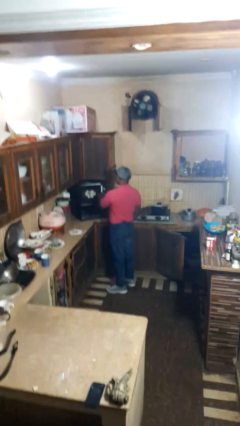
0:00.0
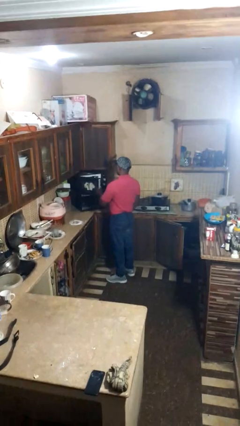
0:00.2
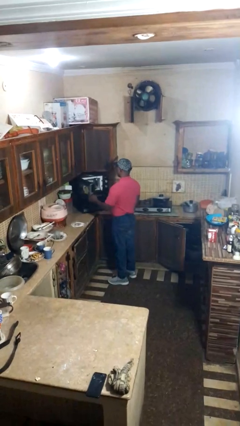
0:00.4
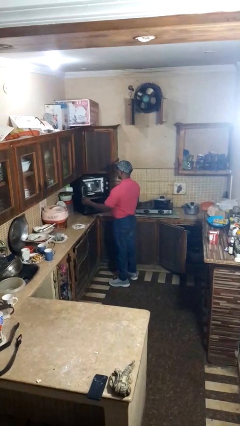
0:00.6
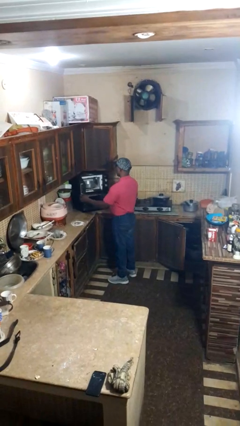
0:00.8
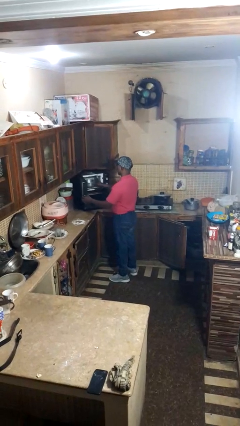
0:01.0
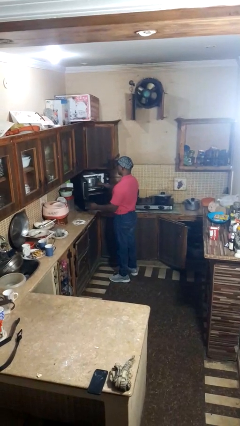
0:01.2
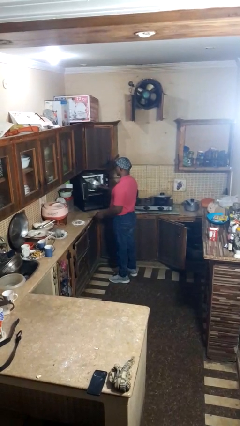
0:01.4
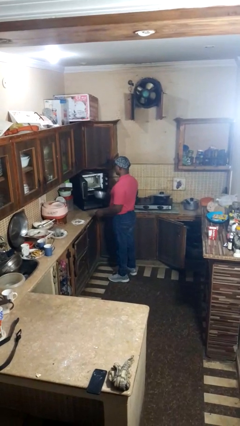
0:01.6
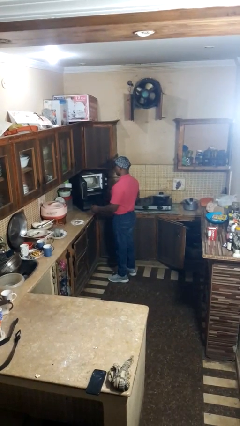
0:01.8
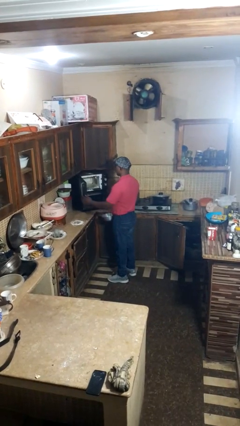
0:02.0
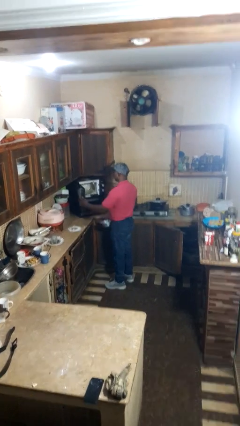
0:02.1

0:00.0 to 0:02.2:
person takes object from microwave

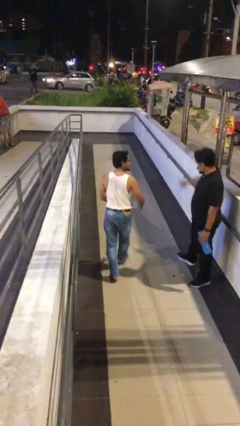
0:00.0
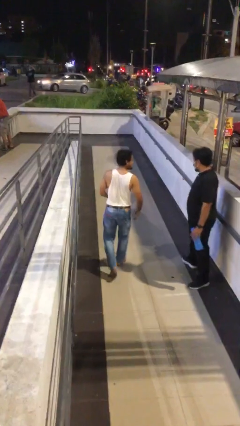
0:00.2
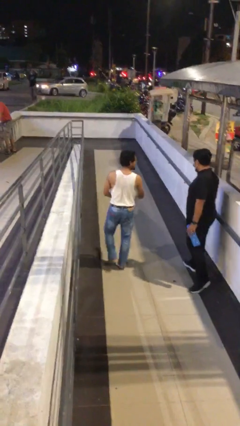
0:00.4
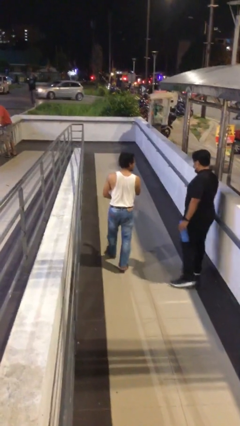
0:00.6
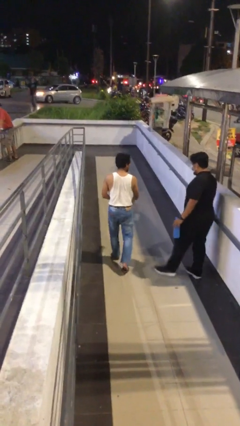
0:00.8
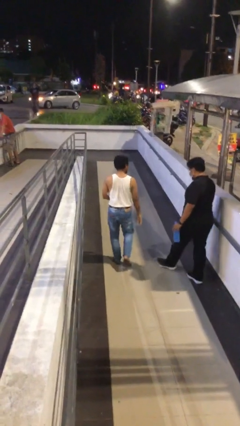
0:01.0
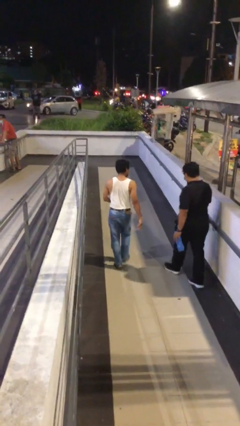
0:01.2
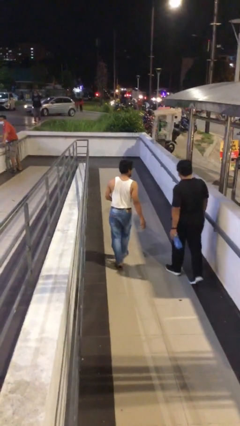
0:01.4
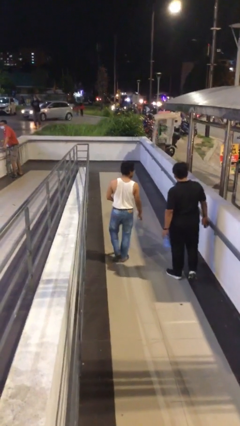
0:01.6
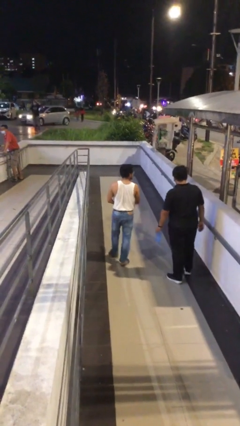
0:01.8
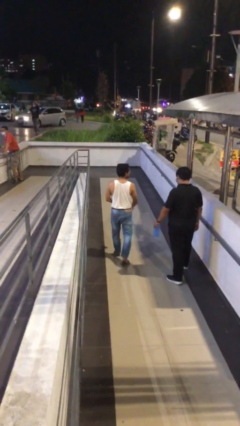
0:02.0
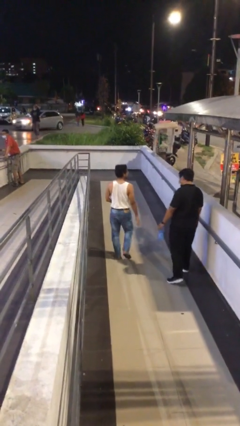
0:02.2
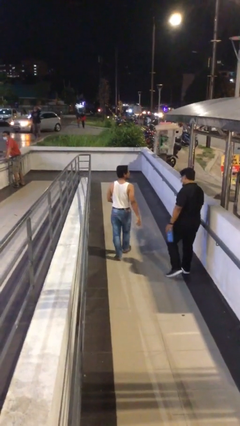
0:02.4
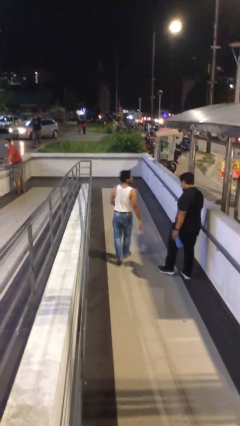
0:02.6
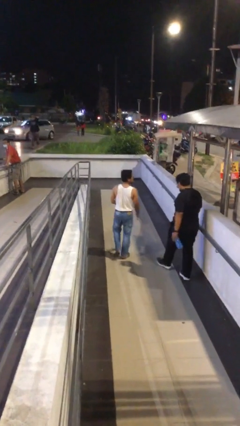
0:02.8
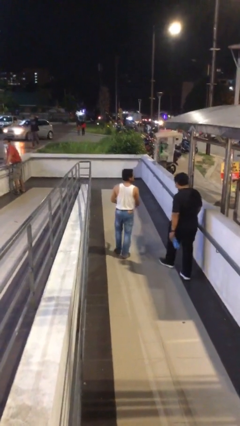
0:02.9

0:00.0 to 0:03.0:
person talks to person

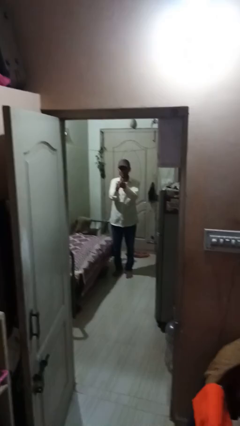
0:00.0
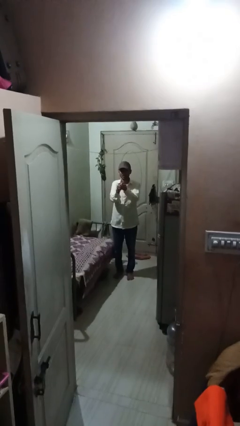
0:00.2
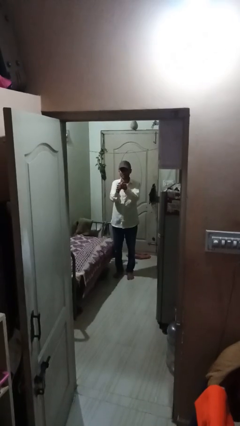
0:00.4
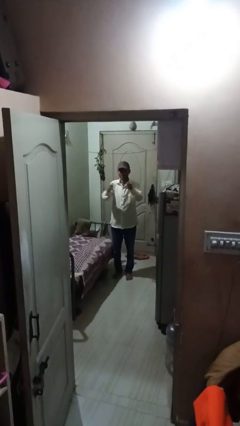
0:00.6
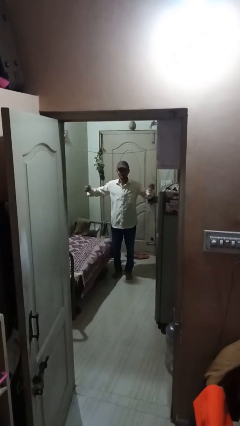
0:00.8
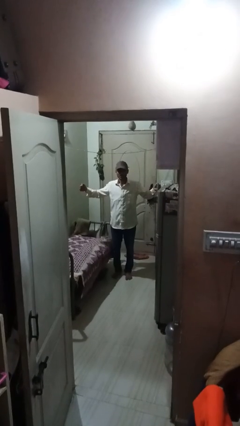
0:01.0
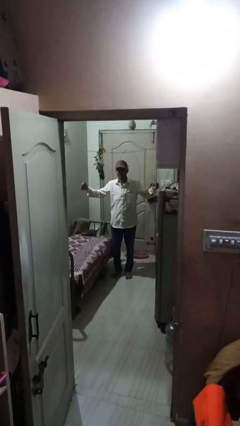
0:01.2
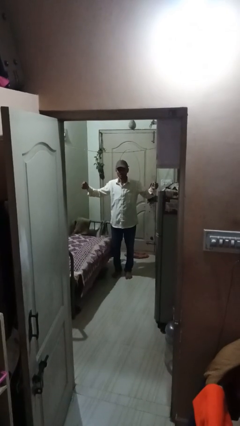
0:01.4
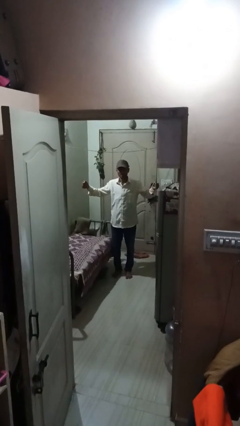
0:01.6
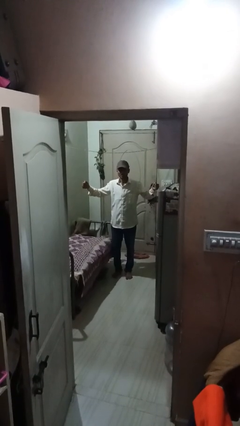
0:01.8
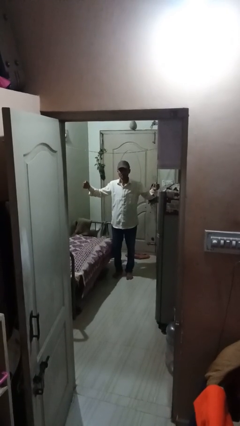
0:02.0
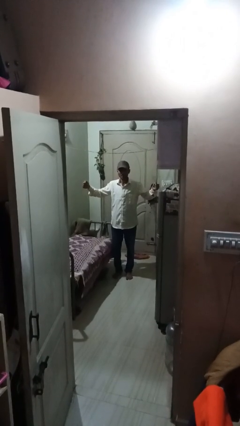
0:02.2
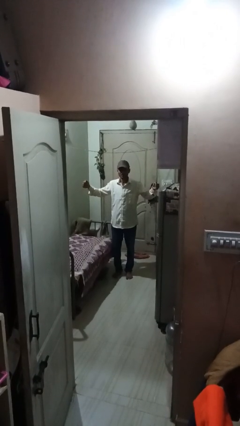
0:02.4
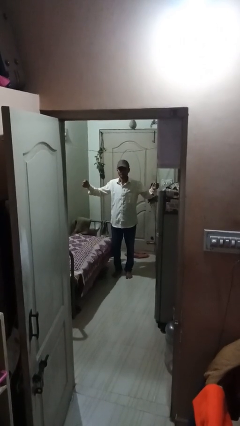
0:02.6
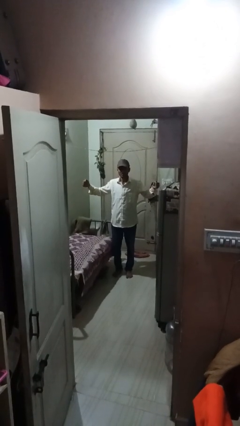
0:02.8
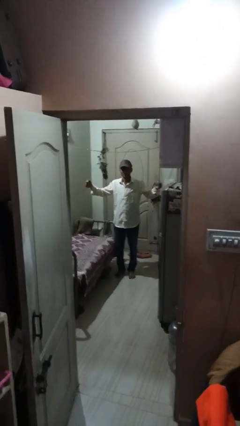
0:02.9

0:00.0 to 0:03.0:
person gestures zoom out

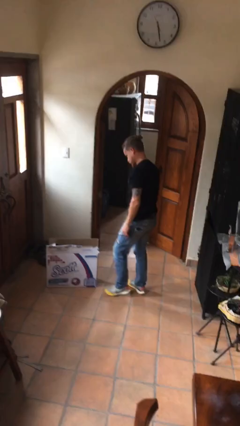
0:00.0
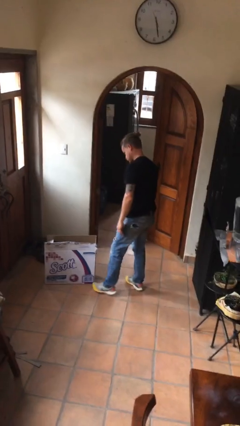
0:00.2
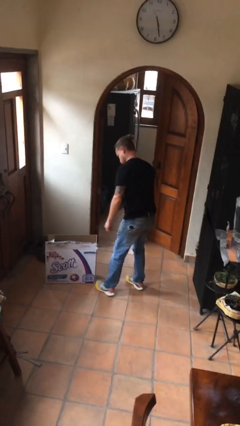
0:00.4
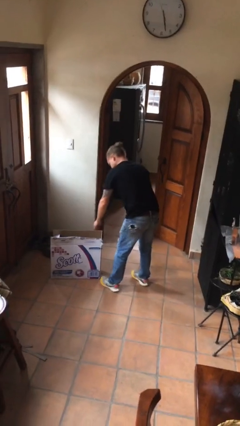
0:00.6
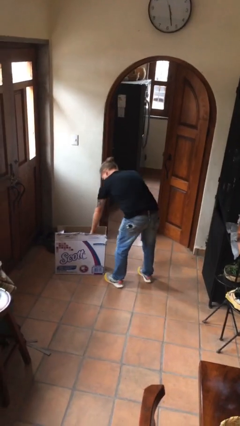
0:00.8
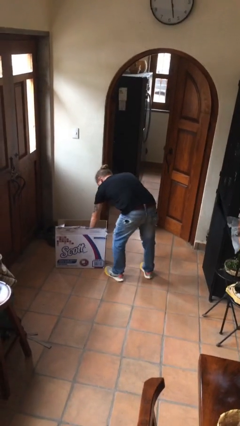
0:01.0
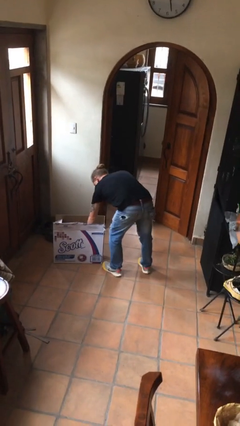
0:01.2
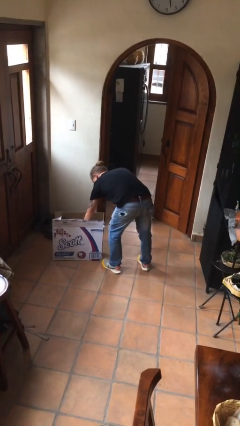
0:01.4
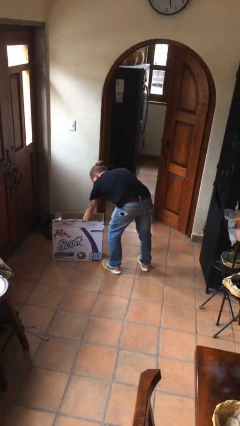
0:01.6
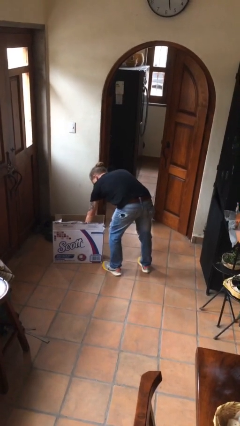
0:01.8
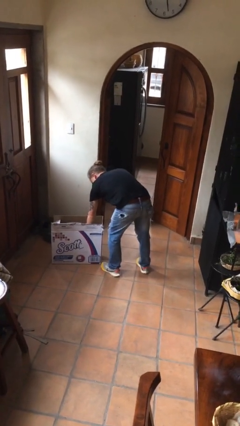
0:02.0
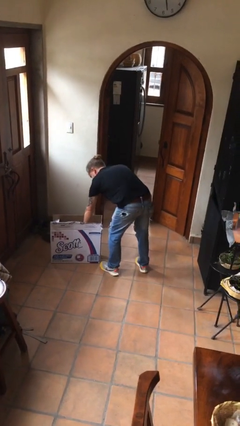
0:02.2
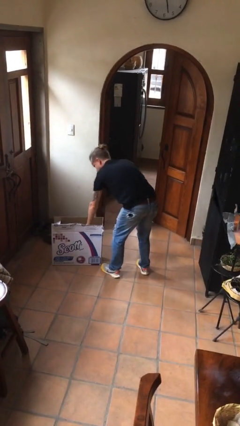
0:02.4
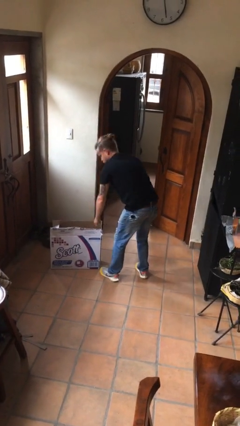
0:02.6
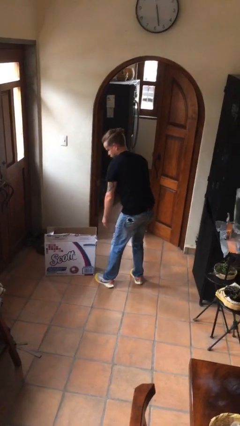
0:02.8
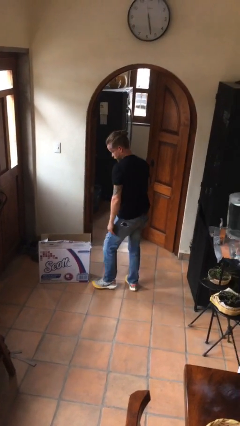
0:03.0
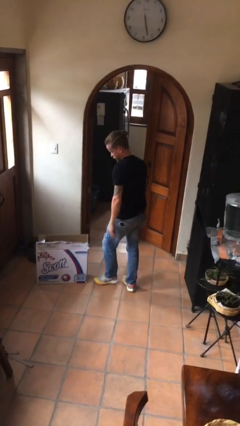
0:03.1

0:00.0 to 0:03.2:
person searches in box

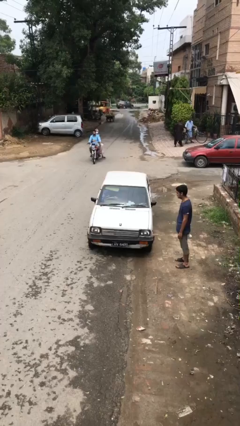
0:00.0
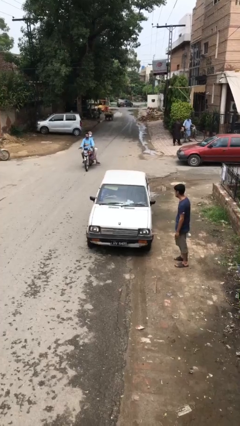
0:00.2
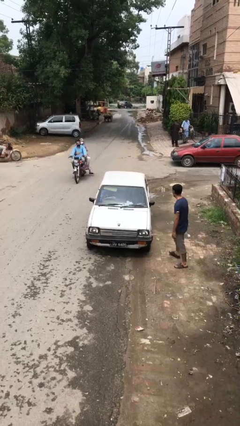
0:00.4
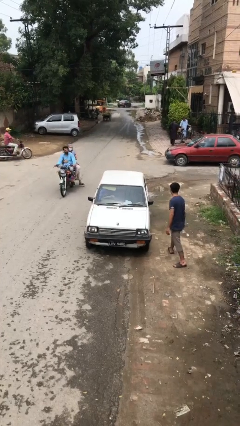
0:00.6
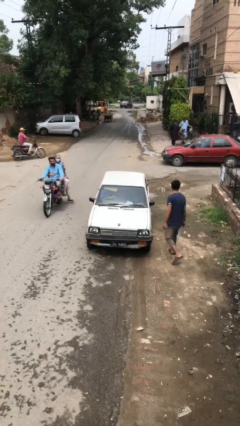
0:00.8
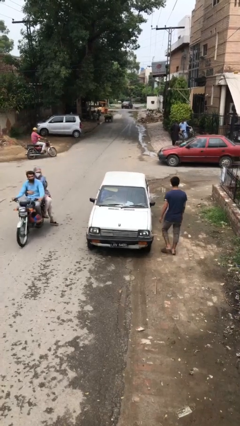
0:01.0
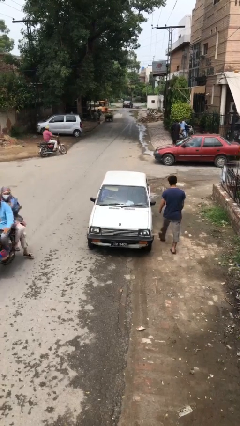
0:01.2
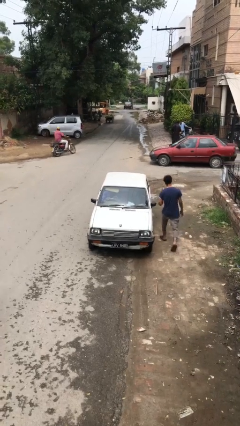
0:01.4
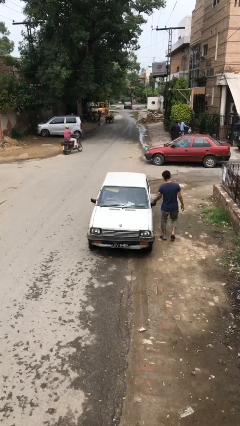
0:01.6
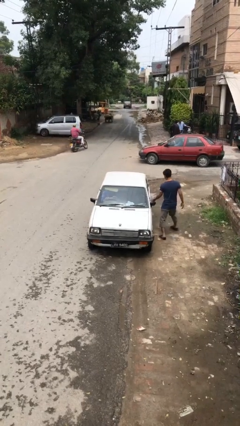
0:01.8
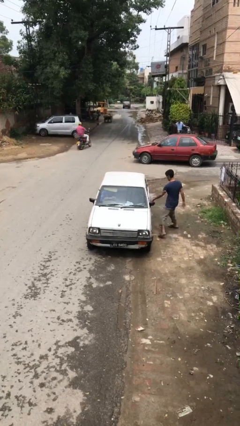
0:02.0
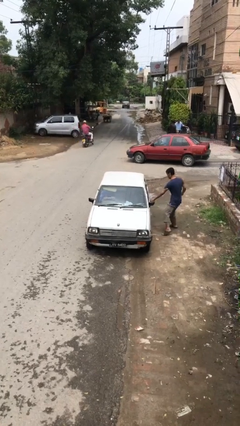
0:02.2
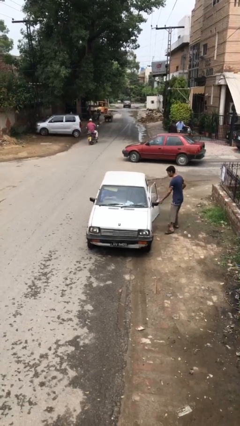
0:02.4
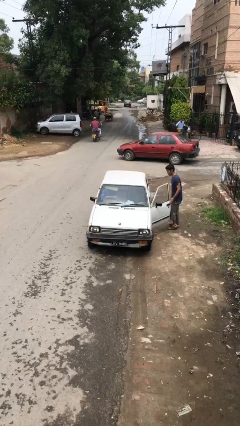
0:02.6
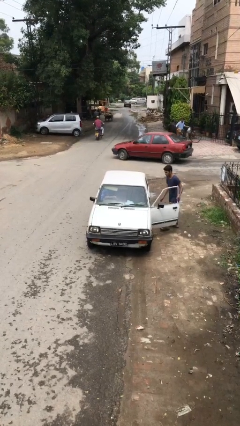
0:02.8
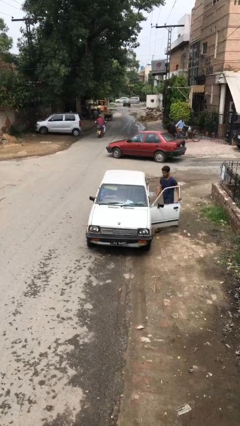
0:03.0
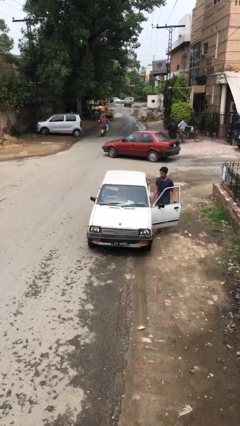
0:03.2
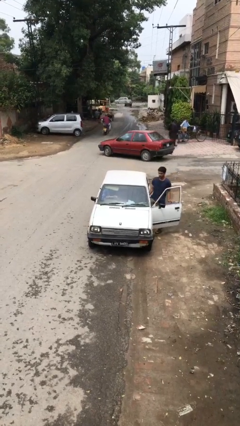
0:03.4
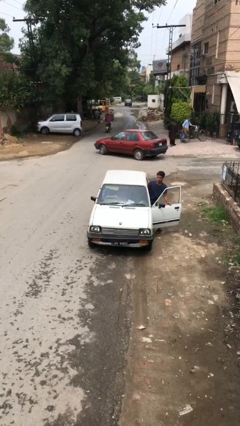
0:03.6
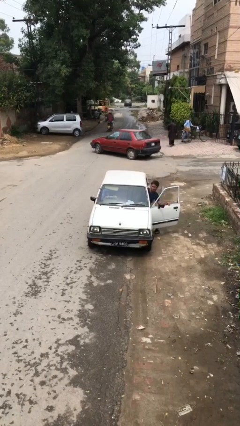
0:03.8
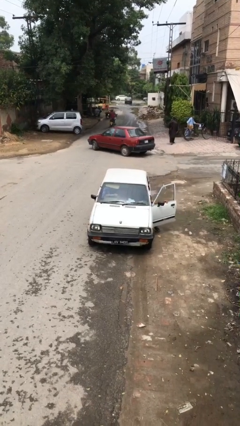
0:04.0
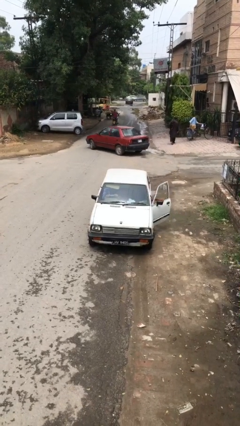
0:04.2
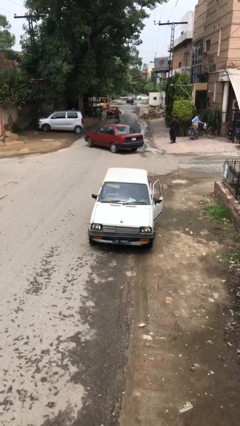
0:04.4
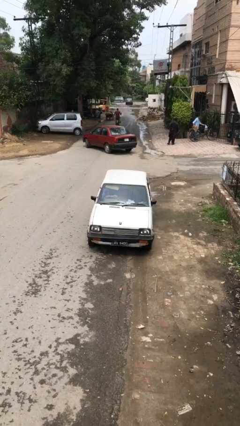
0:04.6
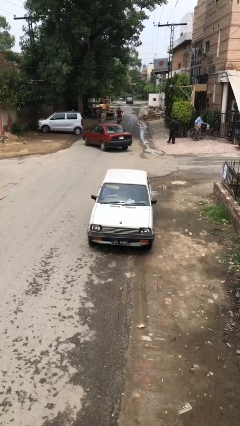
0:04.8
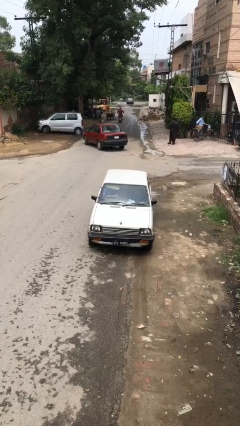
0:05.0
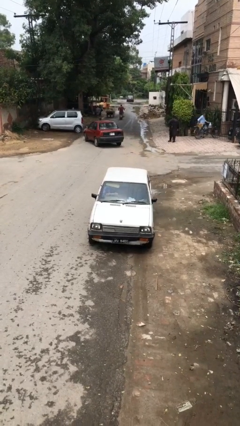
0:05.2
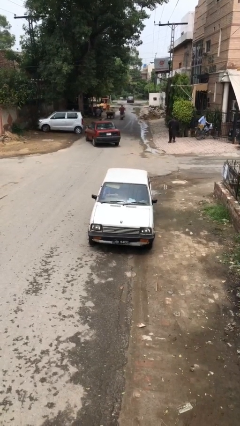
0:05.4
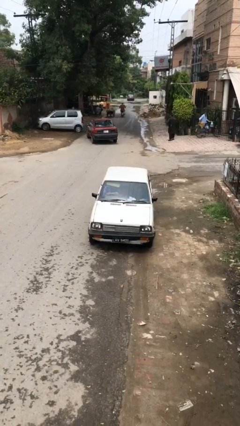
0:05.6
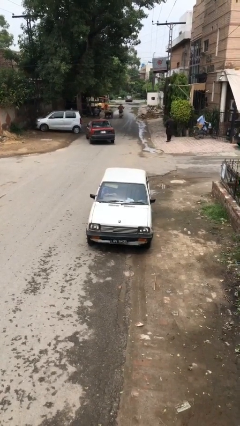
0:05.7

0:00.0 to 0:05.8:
car picks up person

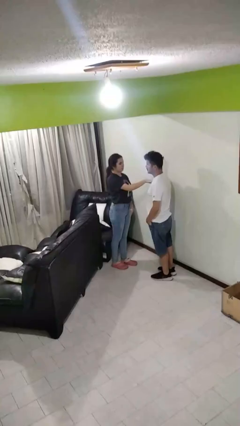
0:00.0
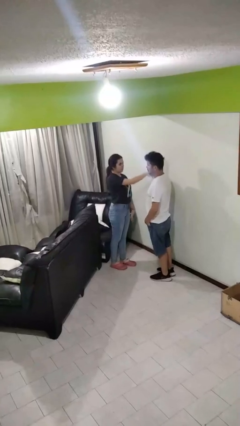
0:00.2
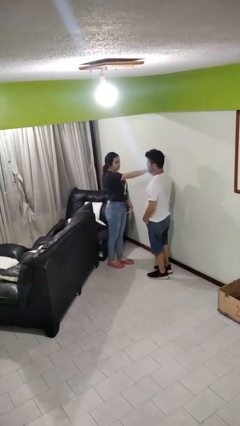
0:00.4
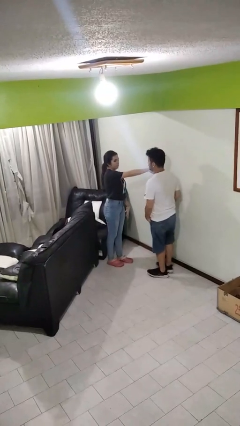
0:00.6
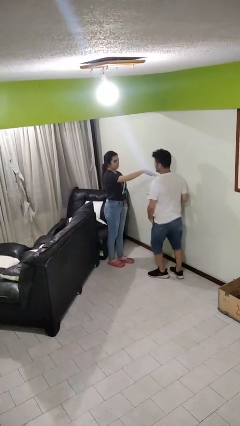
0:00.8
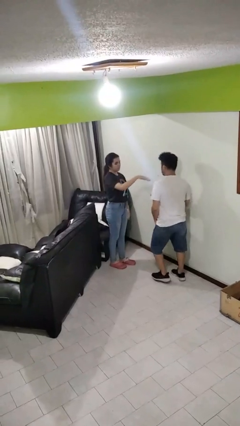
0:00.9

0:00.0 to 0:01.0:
person shoves person
